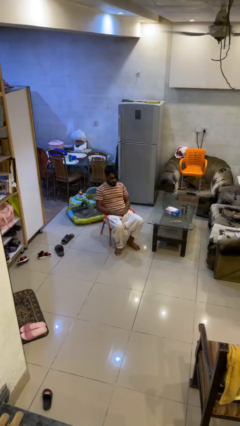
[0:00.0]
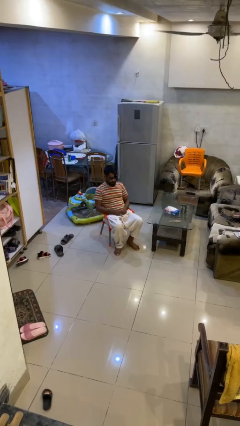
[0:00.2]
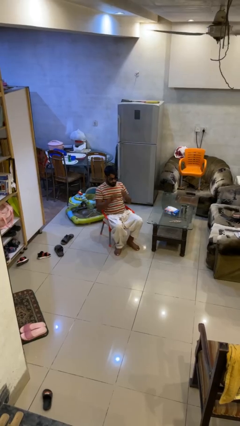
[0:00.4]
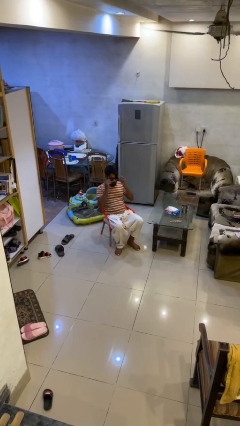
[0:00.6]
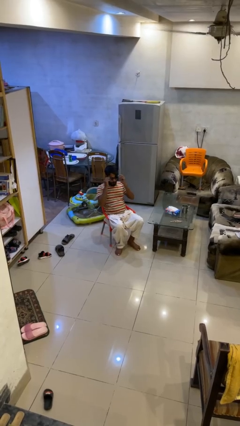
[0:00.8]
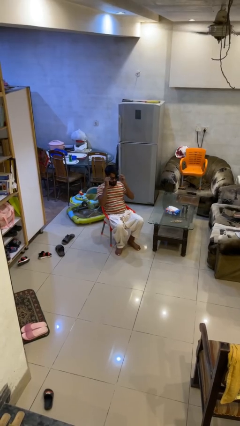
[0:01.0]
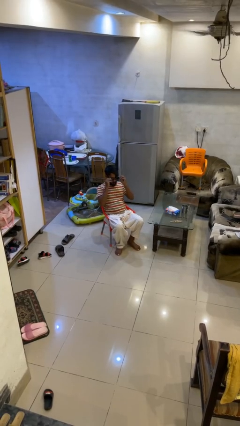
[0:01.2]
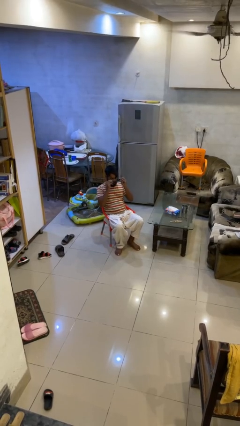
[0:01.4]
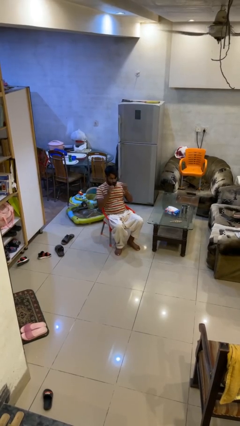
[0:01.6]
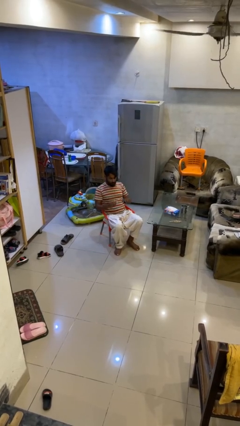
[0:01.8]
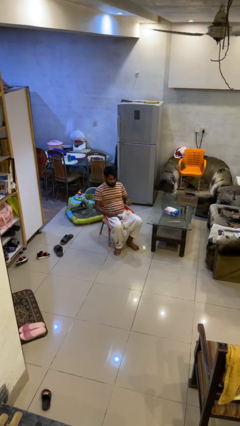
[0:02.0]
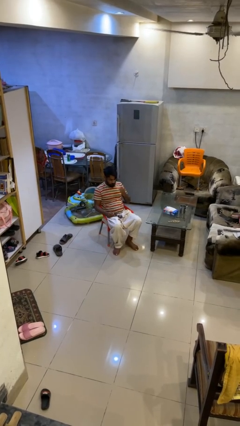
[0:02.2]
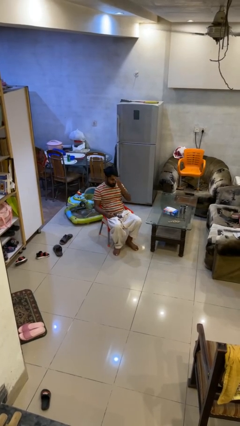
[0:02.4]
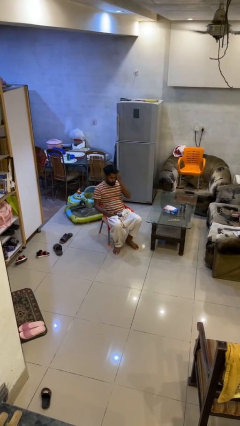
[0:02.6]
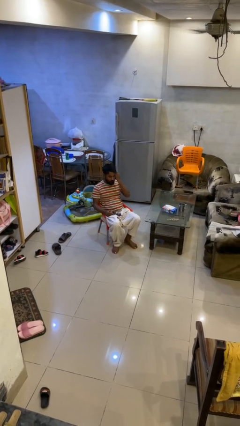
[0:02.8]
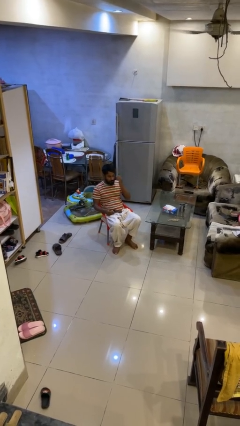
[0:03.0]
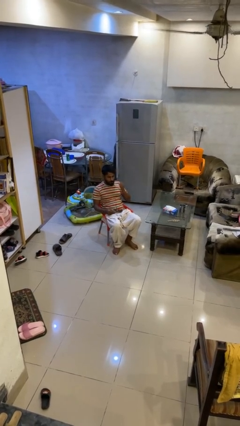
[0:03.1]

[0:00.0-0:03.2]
person takes off sunglasses

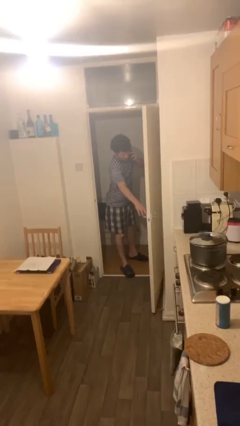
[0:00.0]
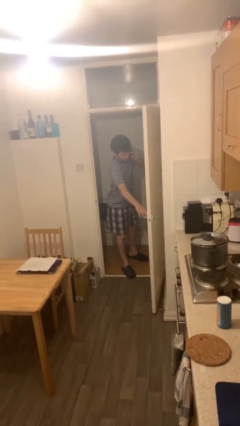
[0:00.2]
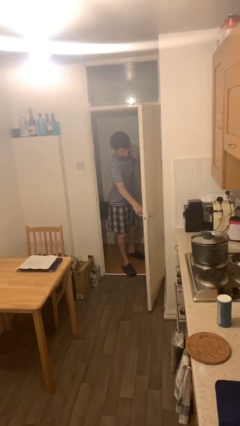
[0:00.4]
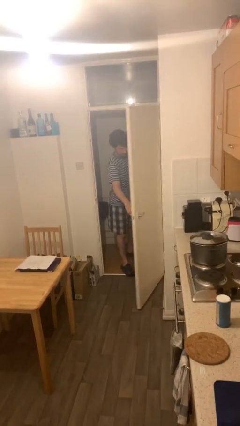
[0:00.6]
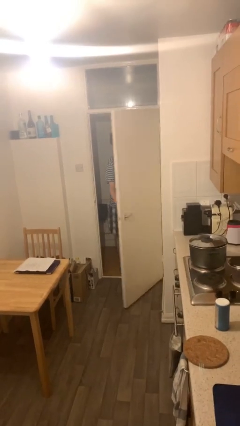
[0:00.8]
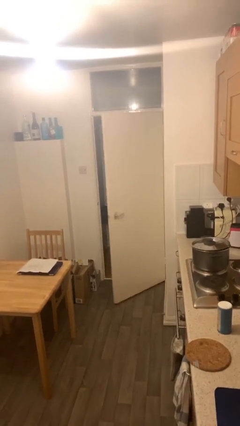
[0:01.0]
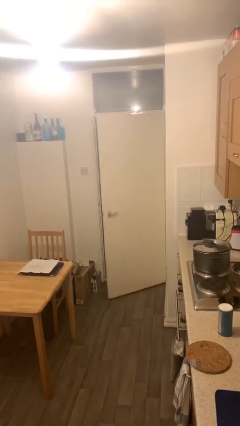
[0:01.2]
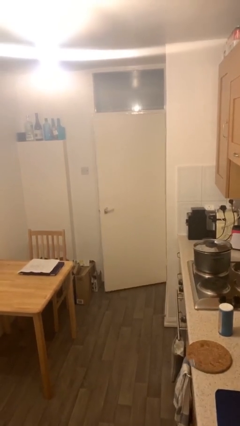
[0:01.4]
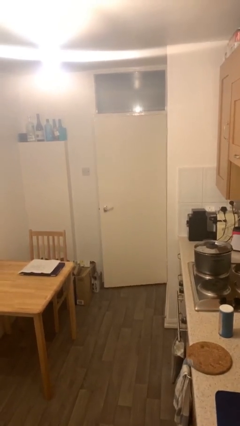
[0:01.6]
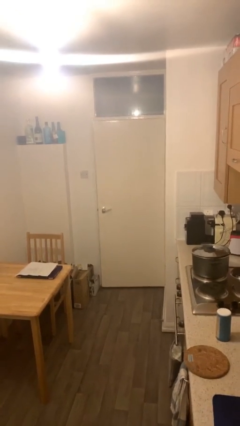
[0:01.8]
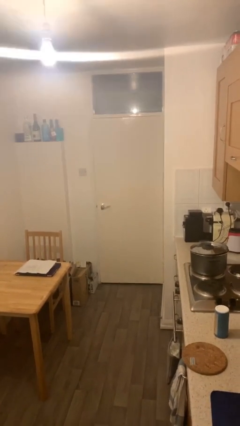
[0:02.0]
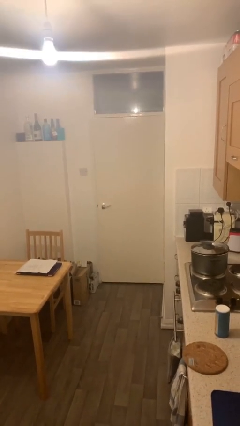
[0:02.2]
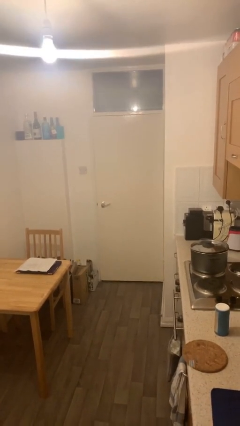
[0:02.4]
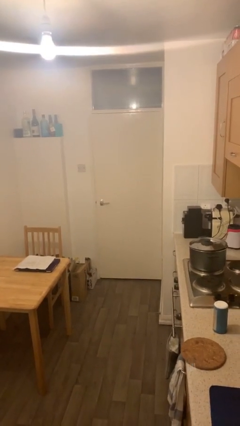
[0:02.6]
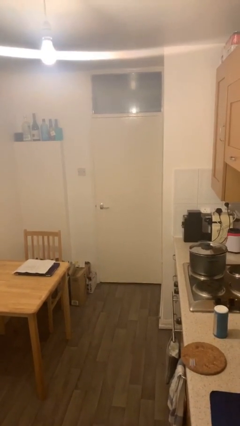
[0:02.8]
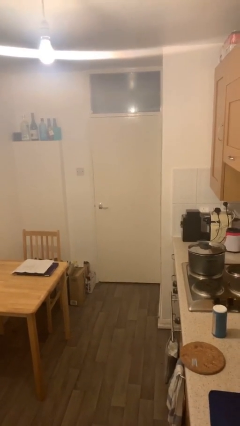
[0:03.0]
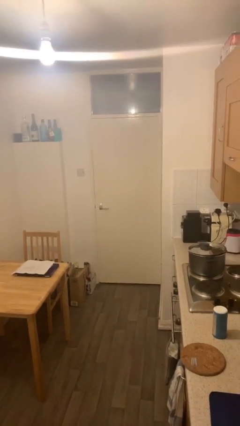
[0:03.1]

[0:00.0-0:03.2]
person closes facility door

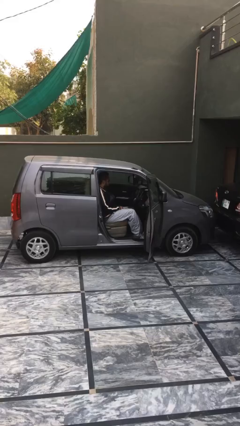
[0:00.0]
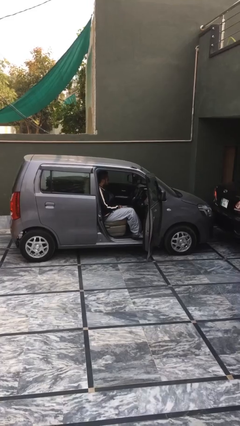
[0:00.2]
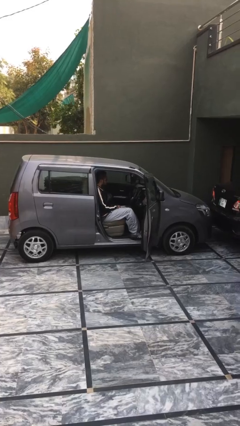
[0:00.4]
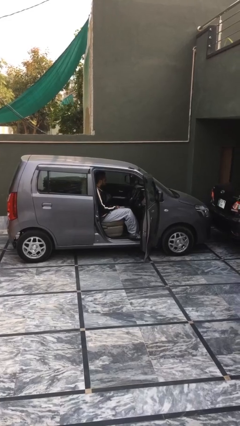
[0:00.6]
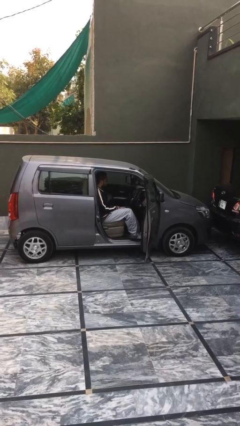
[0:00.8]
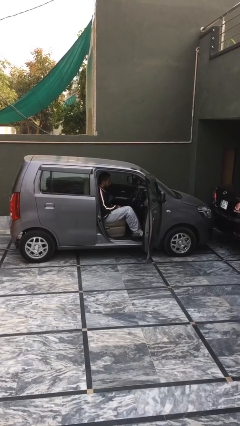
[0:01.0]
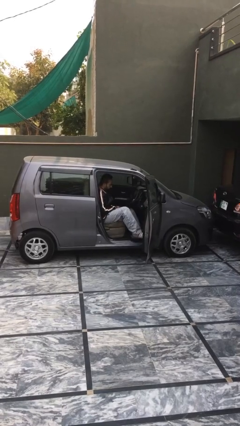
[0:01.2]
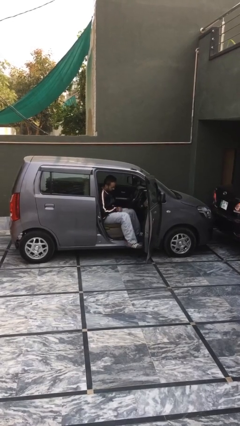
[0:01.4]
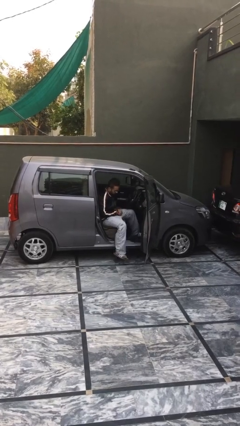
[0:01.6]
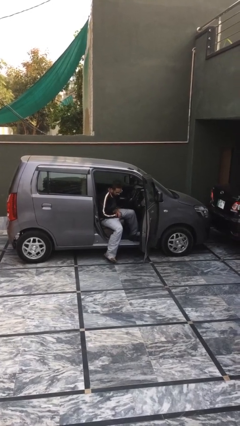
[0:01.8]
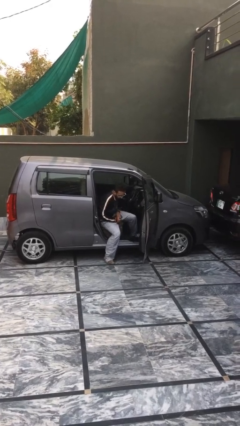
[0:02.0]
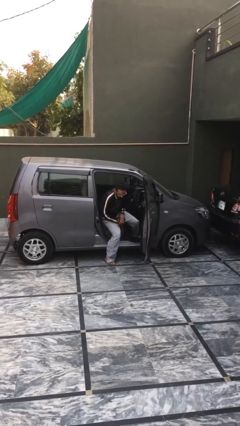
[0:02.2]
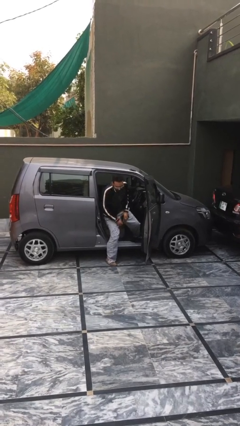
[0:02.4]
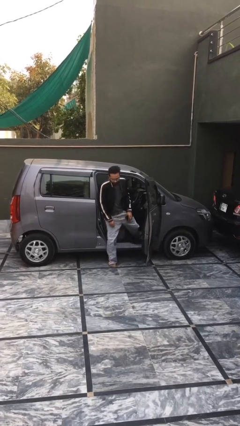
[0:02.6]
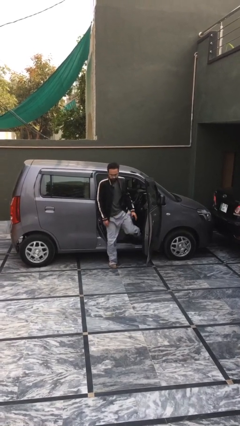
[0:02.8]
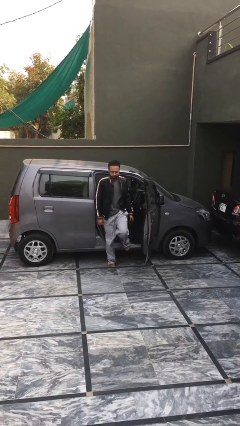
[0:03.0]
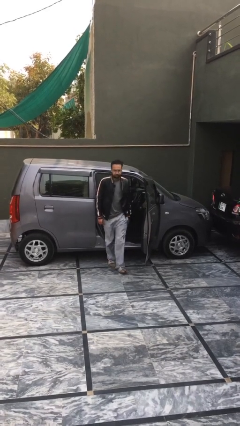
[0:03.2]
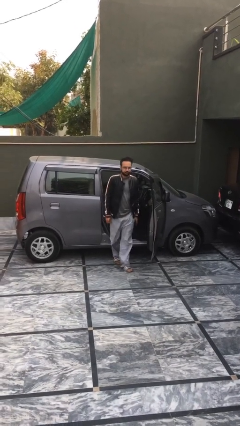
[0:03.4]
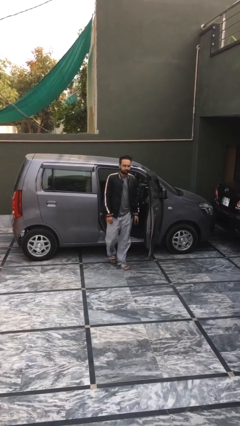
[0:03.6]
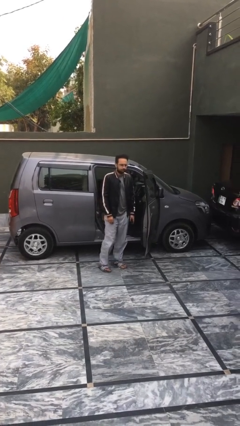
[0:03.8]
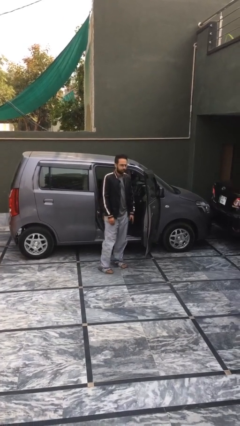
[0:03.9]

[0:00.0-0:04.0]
person exits car

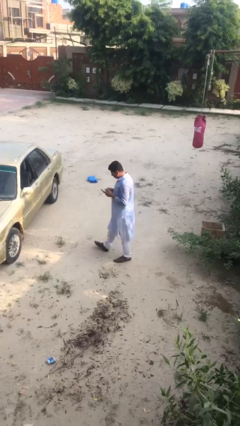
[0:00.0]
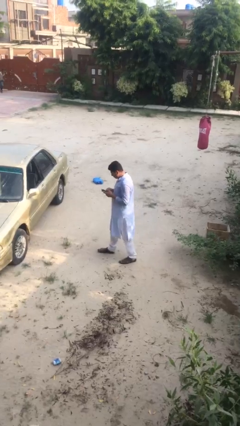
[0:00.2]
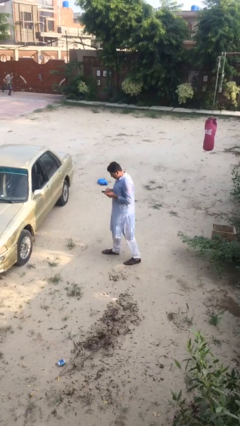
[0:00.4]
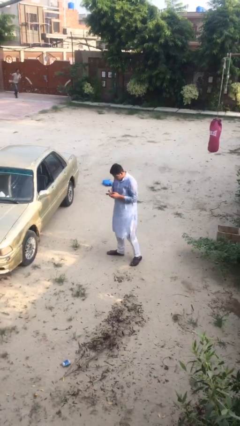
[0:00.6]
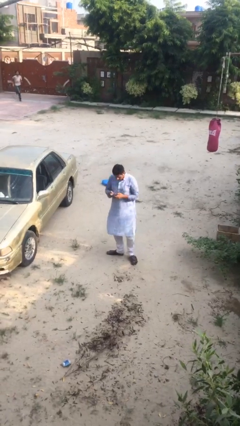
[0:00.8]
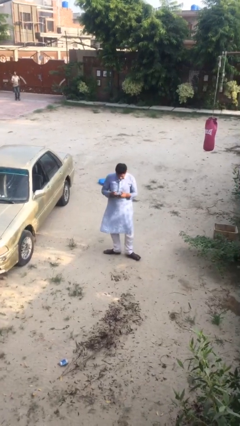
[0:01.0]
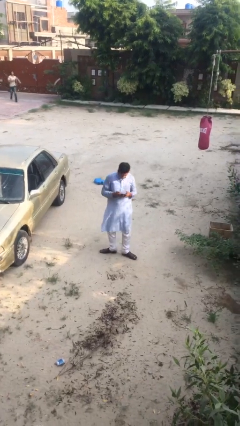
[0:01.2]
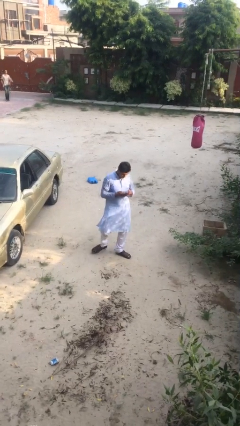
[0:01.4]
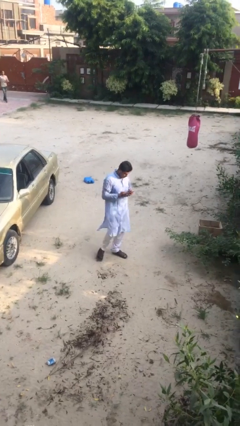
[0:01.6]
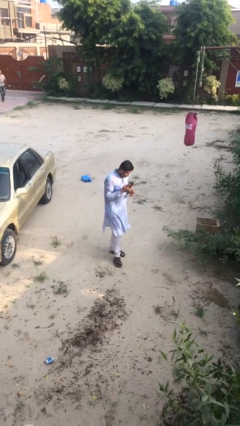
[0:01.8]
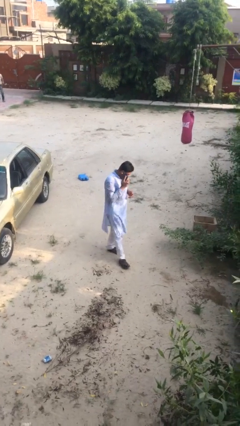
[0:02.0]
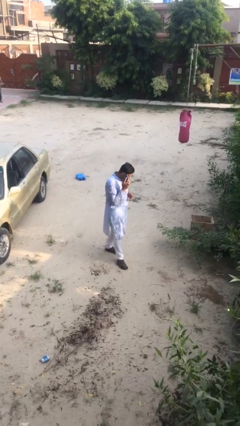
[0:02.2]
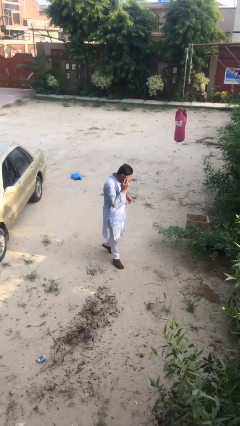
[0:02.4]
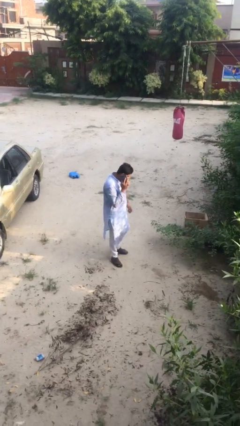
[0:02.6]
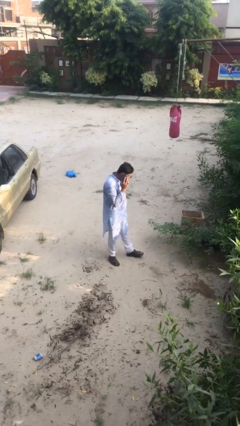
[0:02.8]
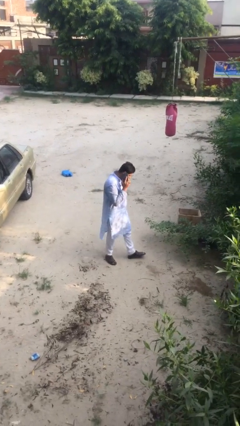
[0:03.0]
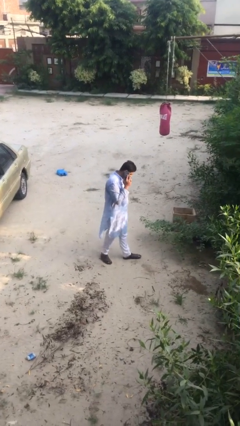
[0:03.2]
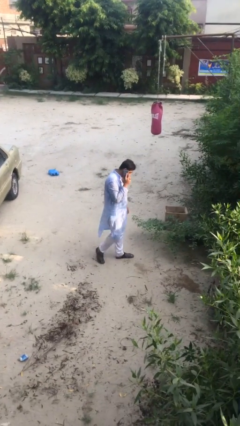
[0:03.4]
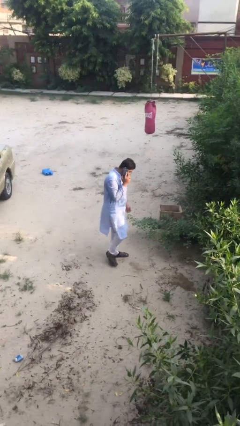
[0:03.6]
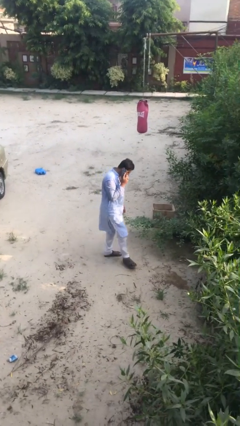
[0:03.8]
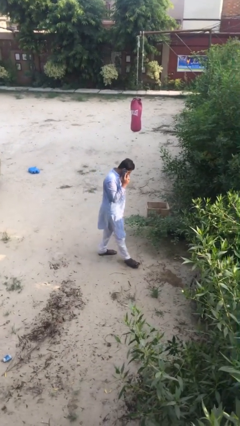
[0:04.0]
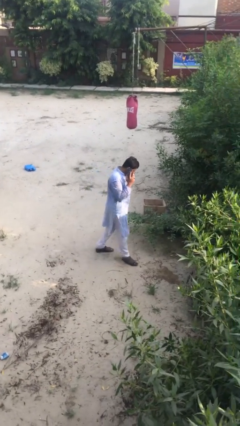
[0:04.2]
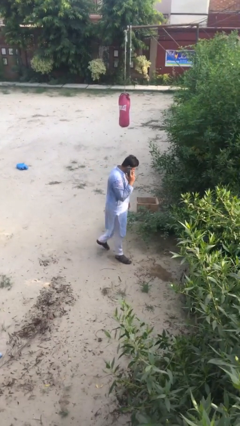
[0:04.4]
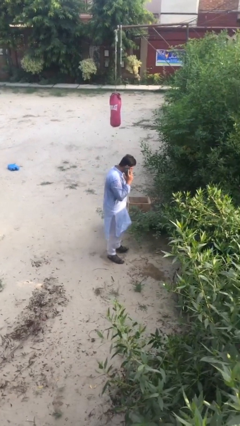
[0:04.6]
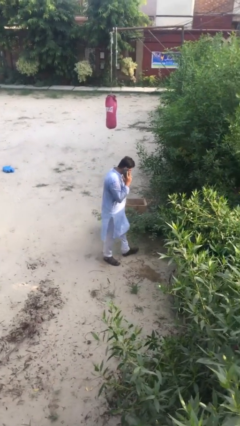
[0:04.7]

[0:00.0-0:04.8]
person talks on phone

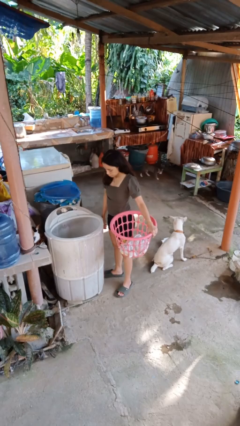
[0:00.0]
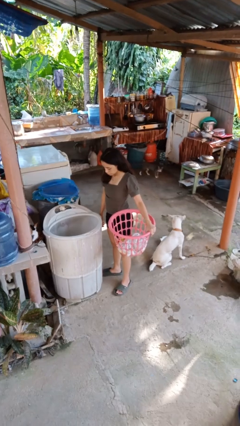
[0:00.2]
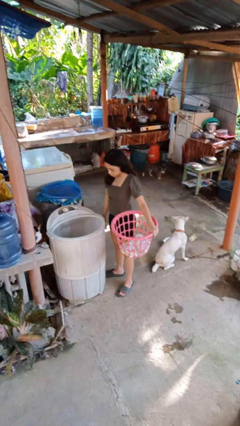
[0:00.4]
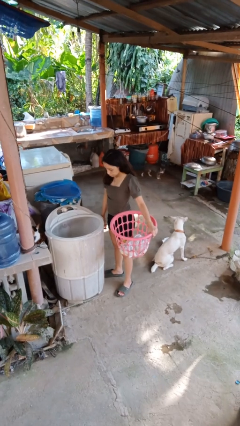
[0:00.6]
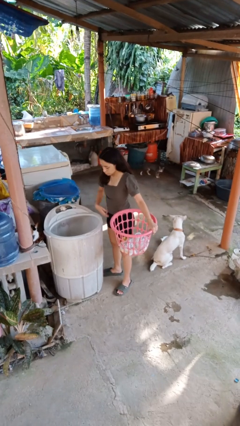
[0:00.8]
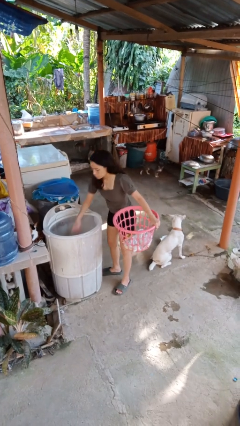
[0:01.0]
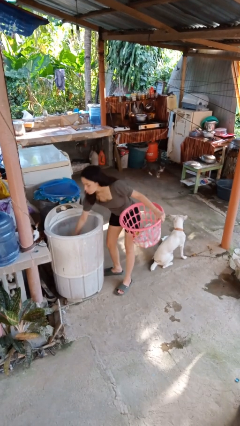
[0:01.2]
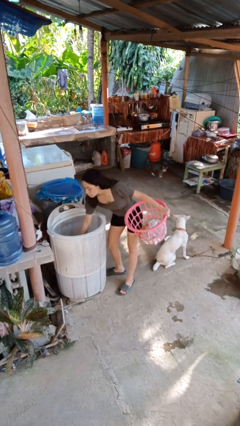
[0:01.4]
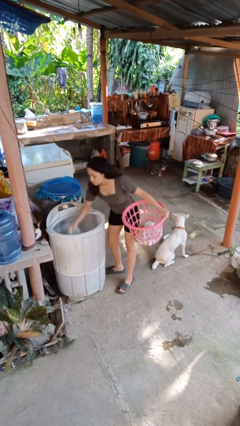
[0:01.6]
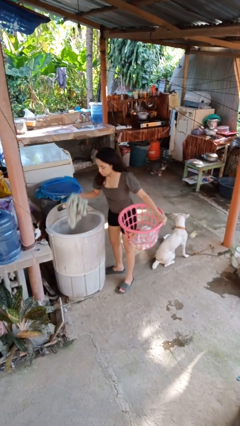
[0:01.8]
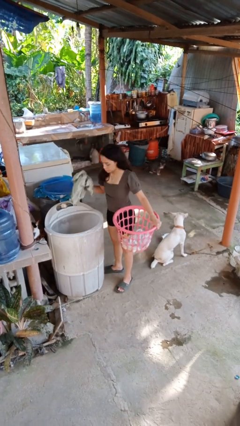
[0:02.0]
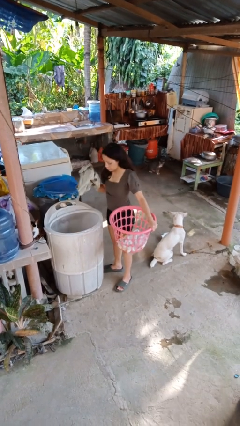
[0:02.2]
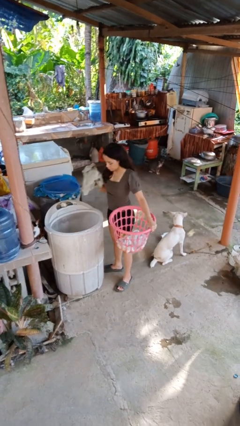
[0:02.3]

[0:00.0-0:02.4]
person unloads dryer
